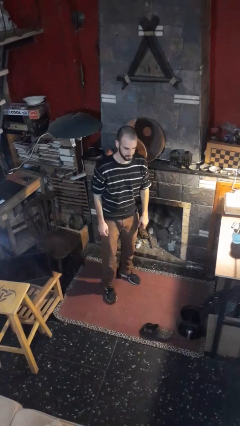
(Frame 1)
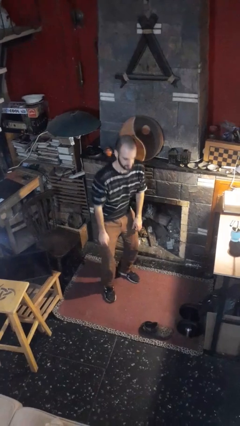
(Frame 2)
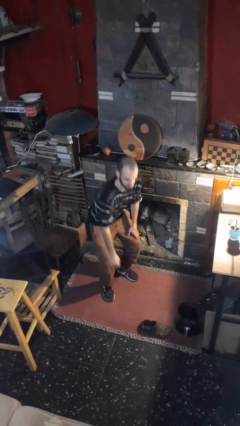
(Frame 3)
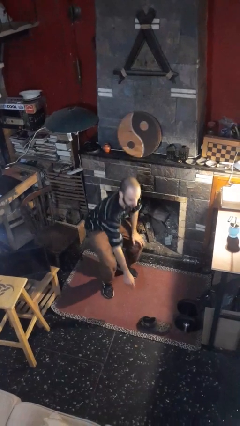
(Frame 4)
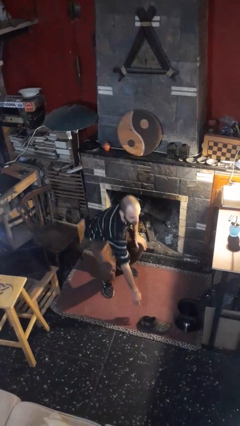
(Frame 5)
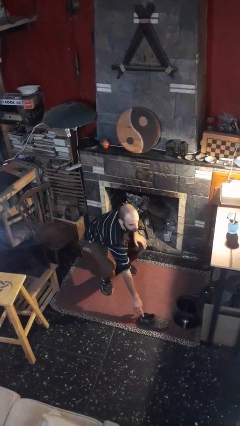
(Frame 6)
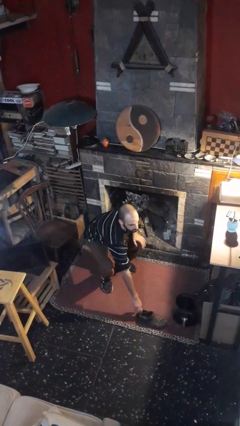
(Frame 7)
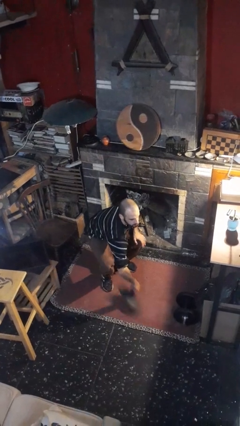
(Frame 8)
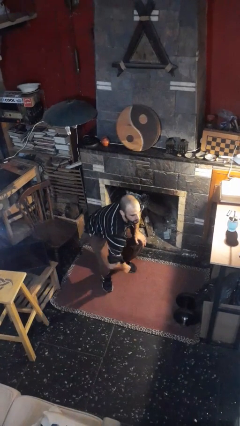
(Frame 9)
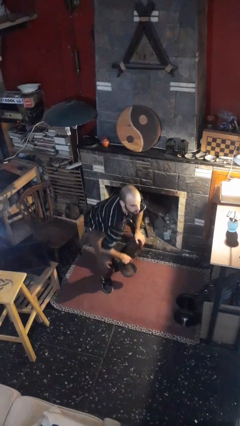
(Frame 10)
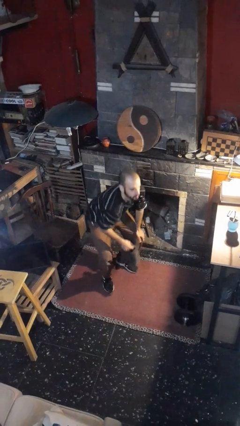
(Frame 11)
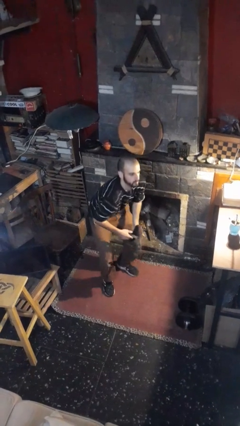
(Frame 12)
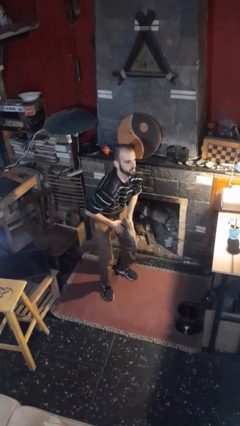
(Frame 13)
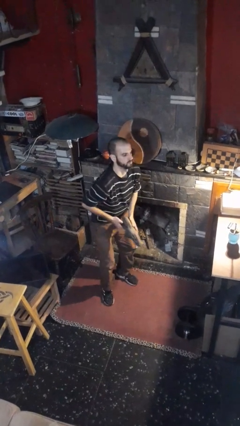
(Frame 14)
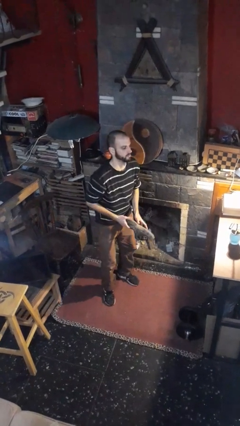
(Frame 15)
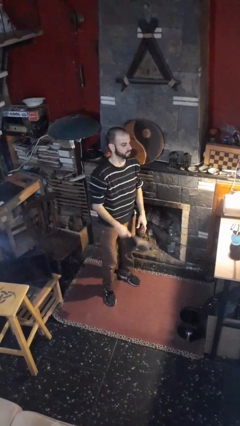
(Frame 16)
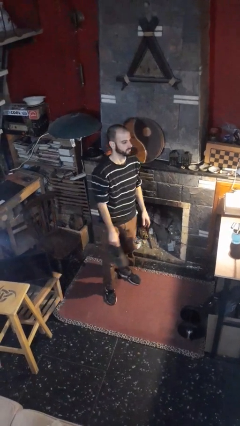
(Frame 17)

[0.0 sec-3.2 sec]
person picks up object from floor

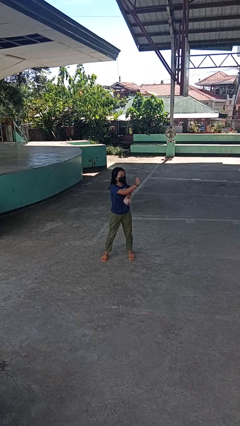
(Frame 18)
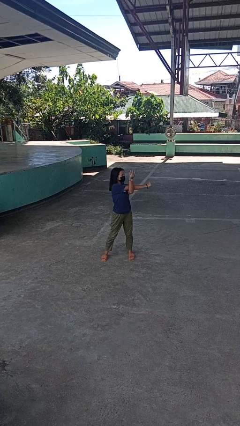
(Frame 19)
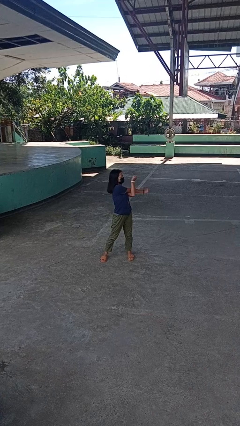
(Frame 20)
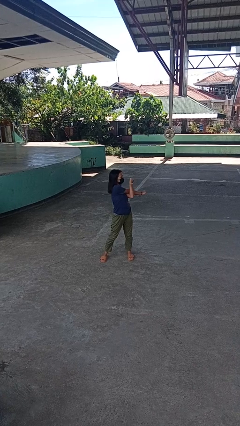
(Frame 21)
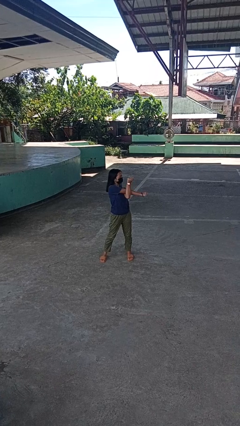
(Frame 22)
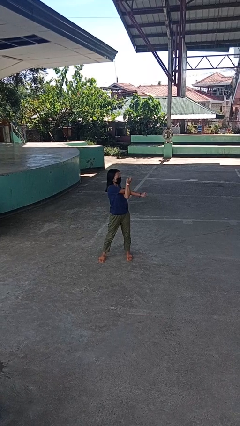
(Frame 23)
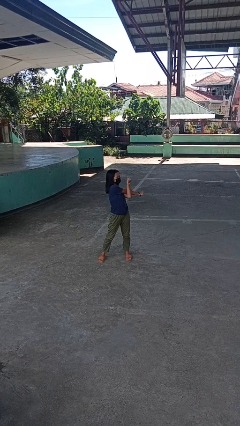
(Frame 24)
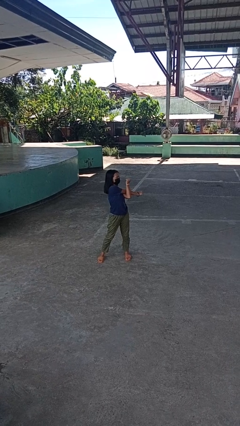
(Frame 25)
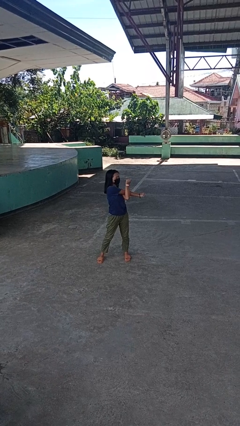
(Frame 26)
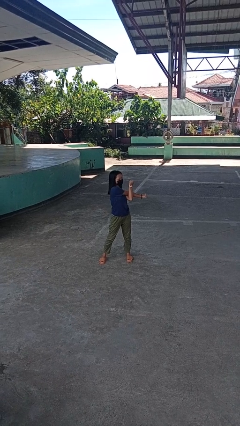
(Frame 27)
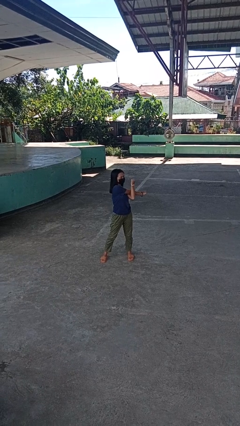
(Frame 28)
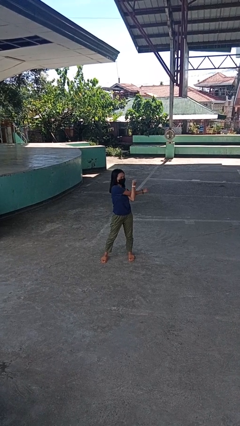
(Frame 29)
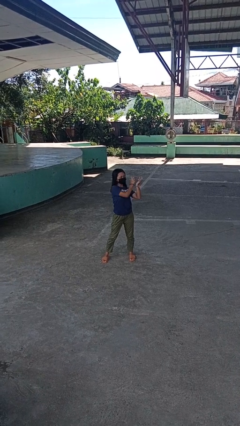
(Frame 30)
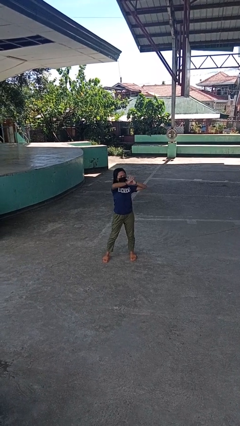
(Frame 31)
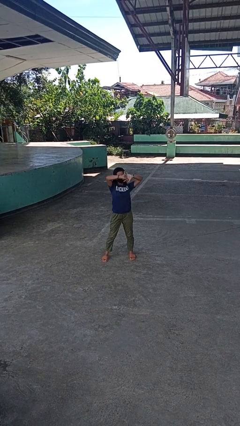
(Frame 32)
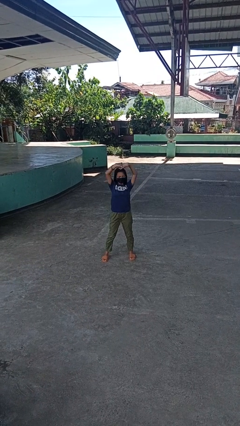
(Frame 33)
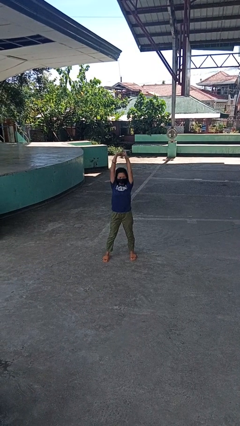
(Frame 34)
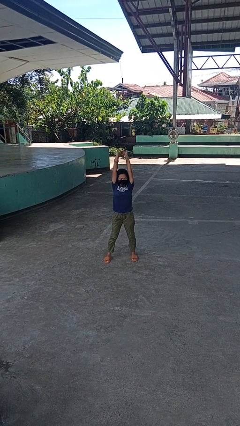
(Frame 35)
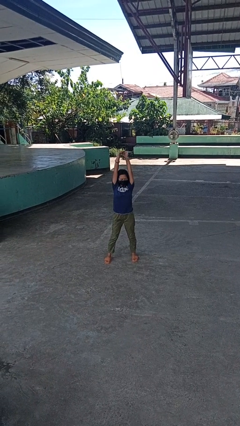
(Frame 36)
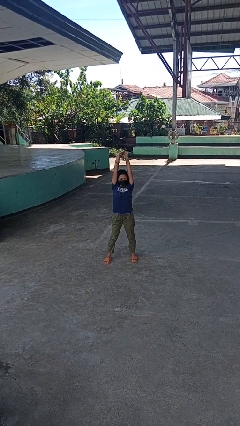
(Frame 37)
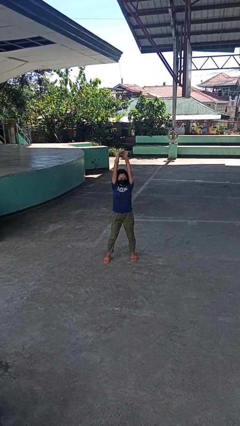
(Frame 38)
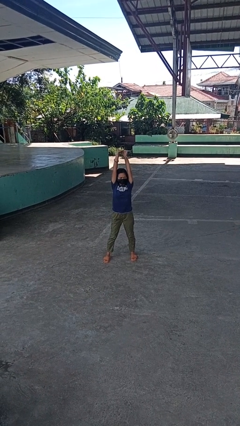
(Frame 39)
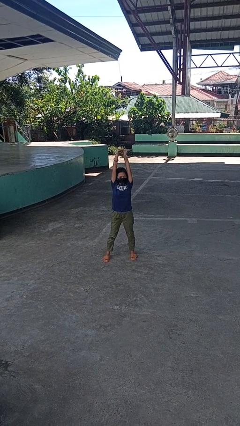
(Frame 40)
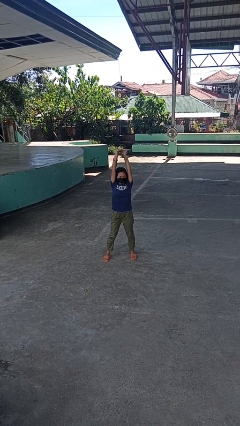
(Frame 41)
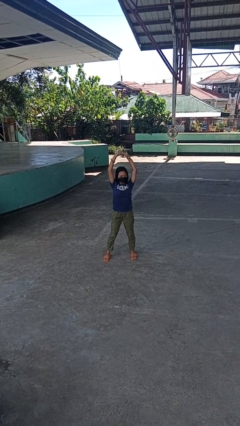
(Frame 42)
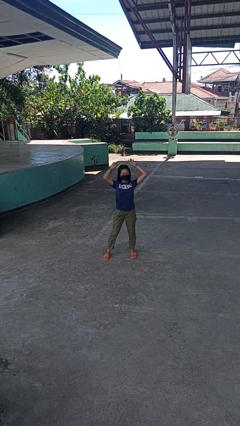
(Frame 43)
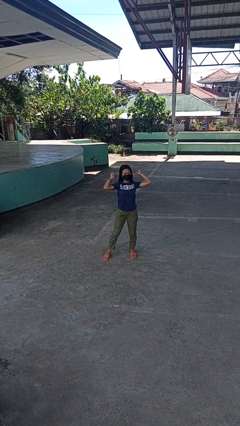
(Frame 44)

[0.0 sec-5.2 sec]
person stretches arms to side

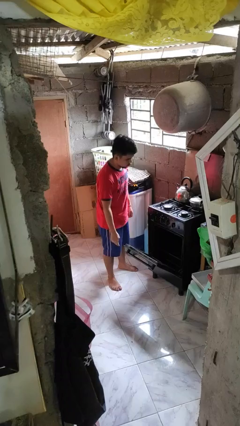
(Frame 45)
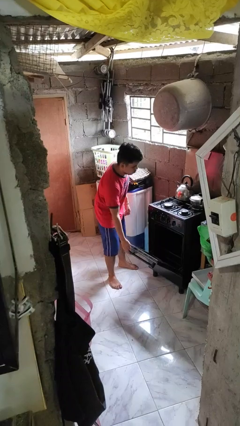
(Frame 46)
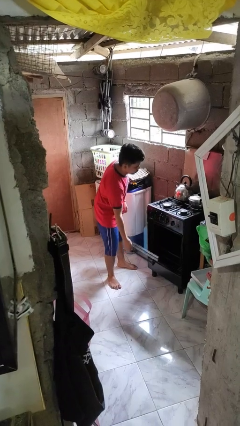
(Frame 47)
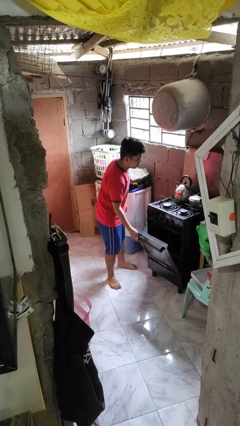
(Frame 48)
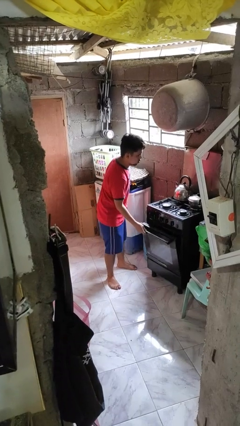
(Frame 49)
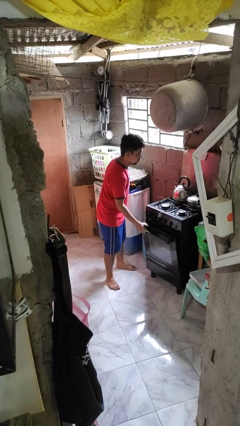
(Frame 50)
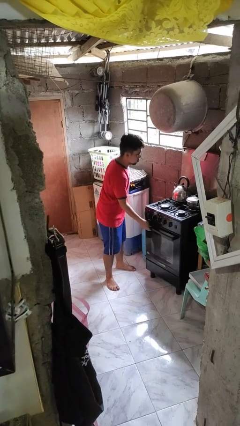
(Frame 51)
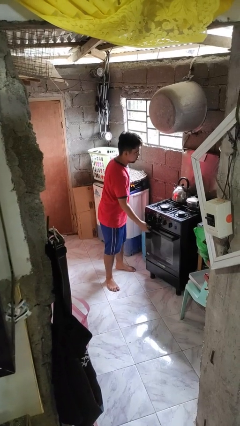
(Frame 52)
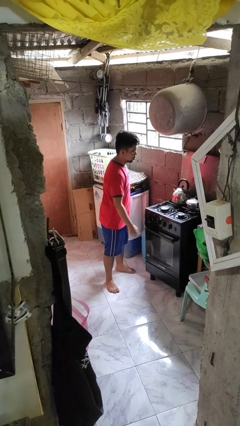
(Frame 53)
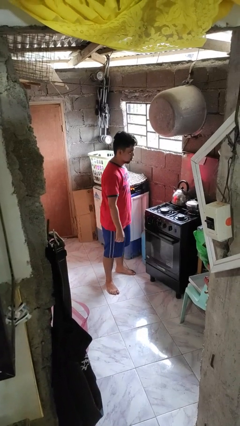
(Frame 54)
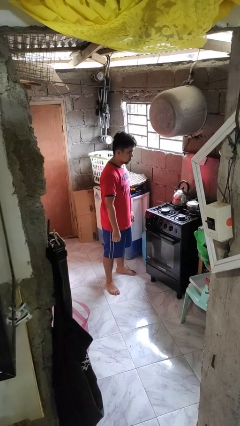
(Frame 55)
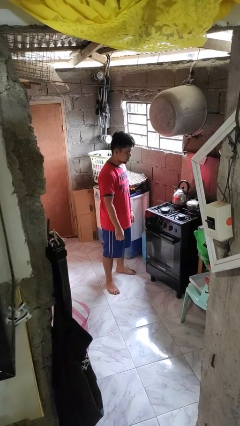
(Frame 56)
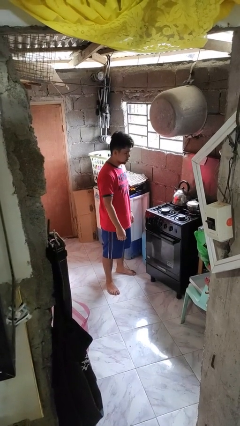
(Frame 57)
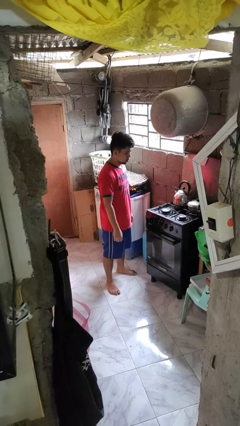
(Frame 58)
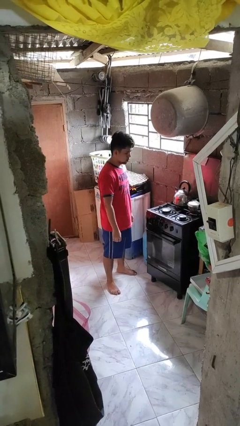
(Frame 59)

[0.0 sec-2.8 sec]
person closes oven door

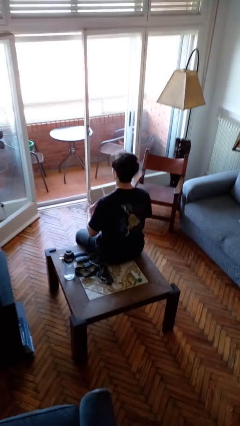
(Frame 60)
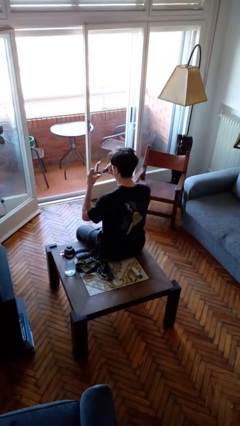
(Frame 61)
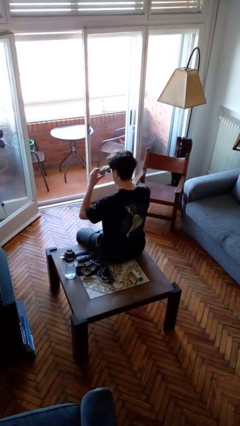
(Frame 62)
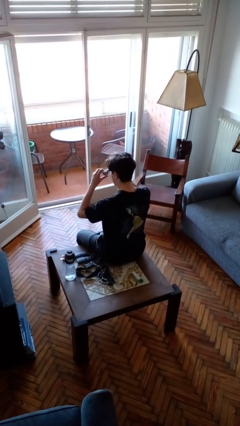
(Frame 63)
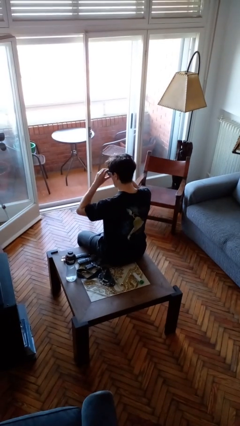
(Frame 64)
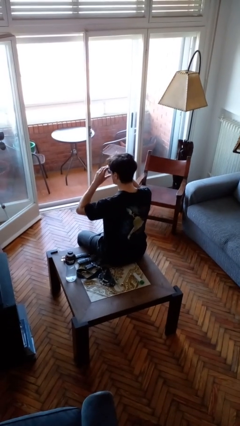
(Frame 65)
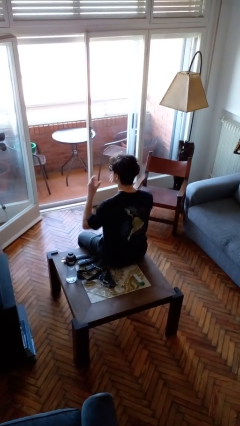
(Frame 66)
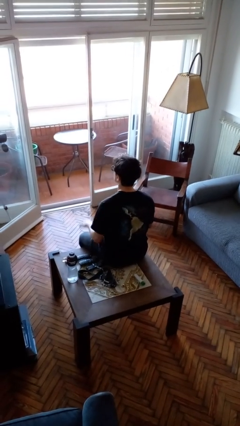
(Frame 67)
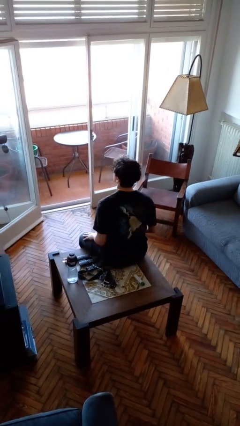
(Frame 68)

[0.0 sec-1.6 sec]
person puts on sunglasses

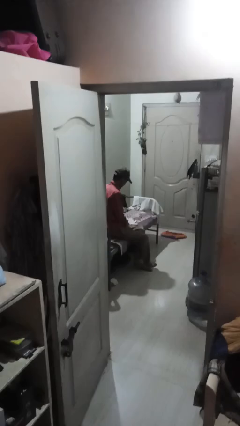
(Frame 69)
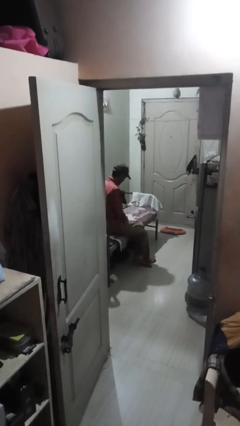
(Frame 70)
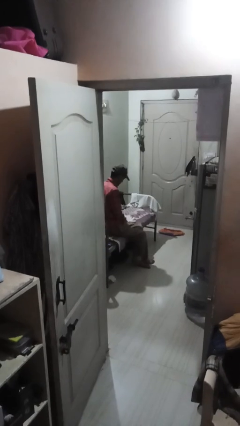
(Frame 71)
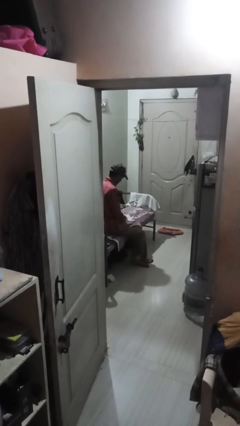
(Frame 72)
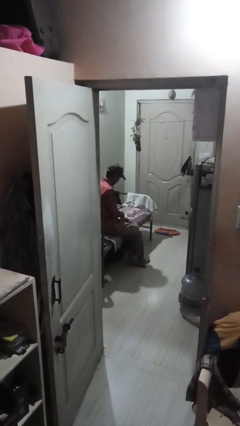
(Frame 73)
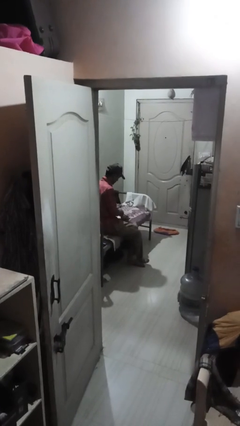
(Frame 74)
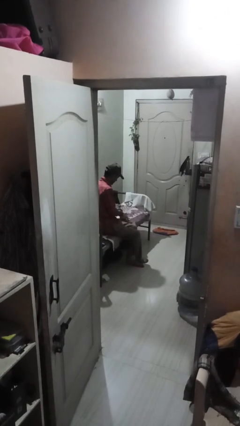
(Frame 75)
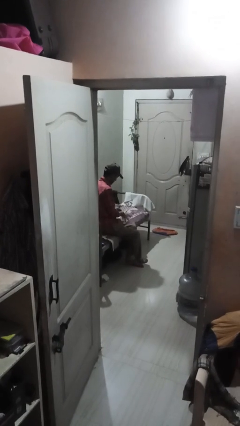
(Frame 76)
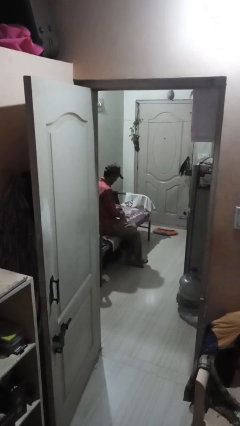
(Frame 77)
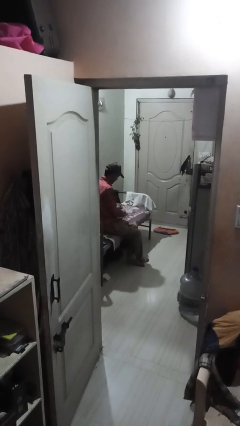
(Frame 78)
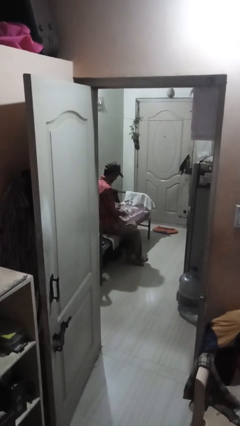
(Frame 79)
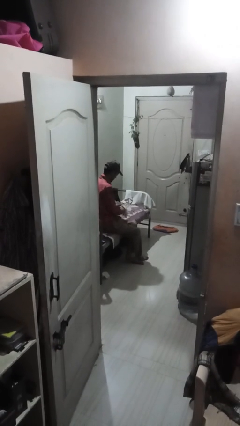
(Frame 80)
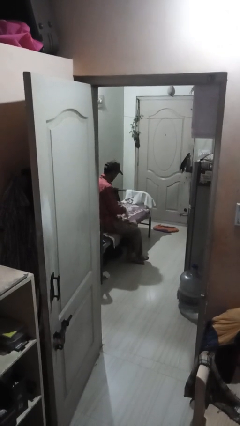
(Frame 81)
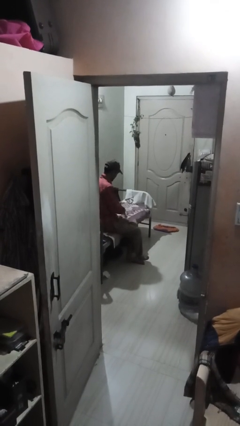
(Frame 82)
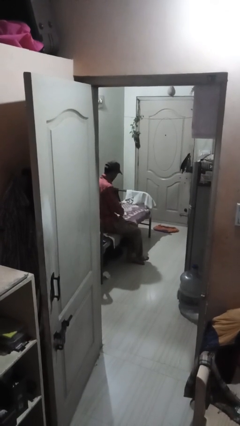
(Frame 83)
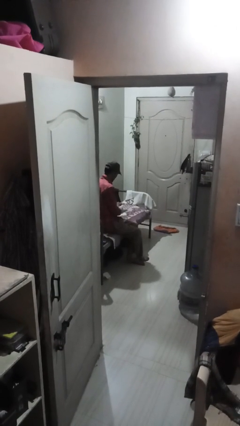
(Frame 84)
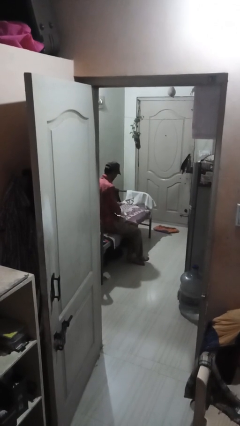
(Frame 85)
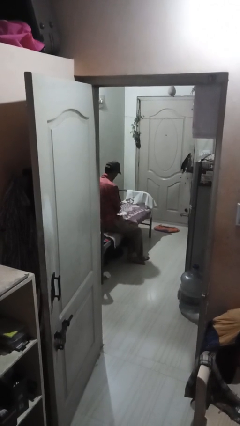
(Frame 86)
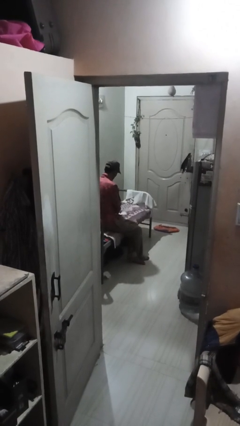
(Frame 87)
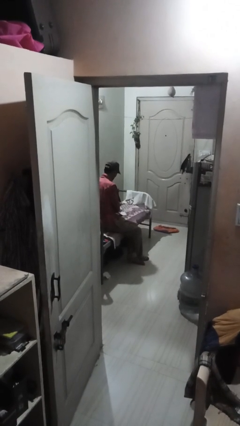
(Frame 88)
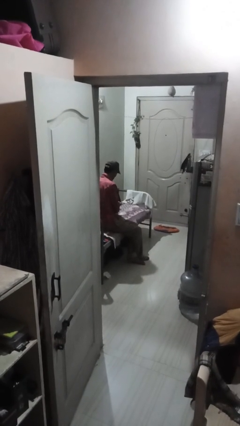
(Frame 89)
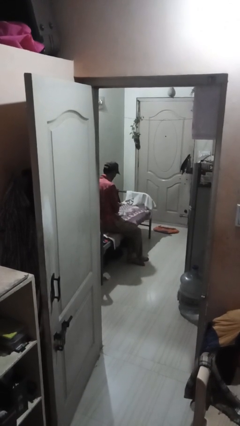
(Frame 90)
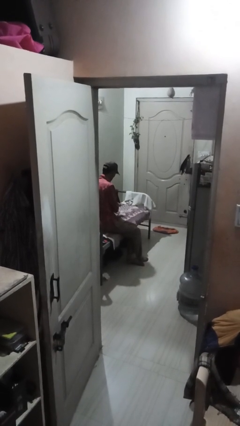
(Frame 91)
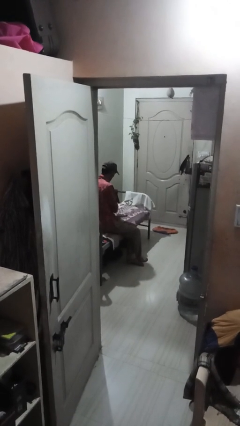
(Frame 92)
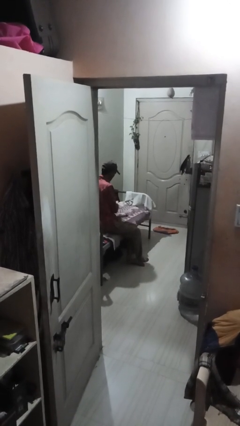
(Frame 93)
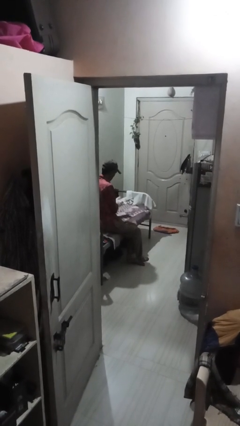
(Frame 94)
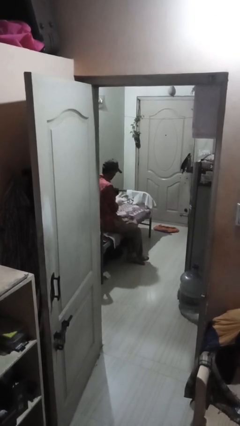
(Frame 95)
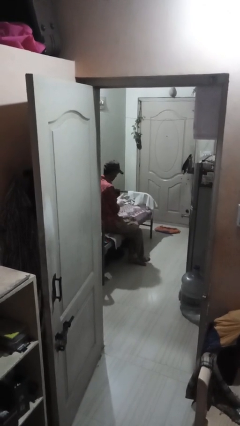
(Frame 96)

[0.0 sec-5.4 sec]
person puts on gloves
